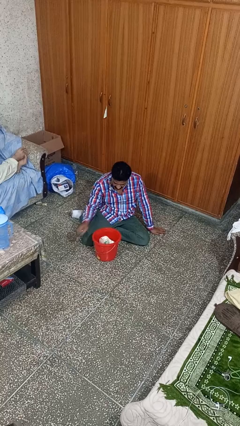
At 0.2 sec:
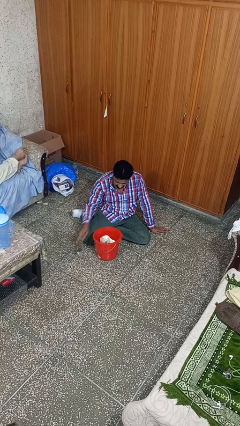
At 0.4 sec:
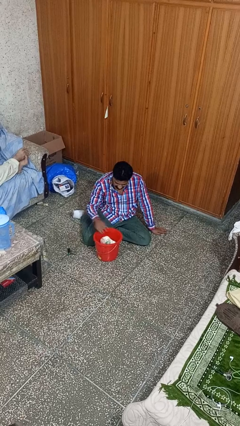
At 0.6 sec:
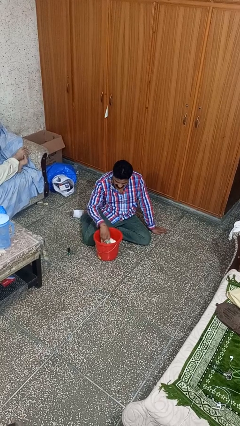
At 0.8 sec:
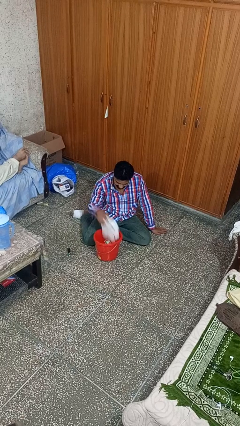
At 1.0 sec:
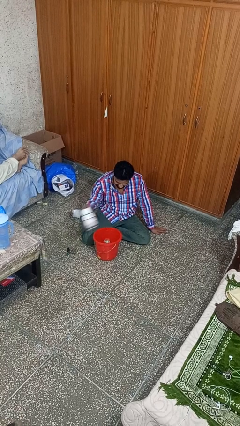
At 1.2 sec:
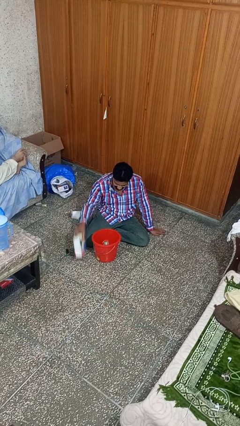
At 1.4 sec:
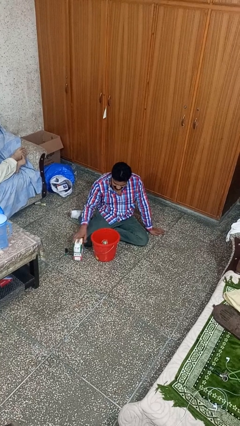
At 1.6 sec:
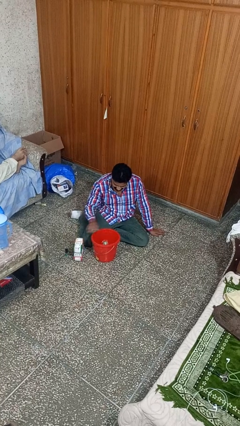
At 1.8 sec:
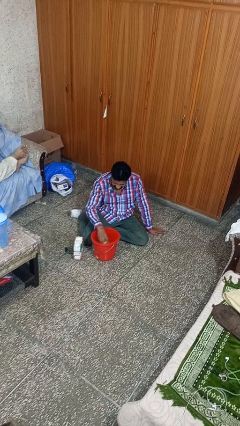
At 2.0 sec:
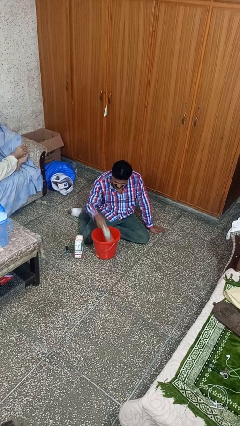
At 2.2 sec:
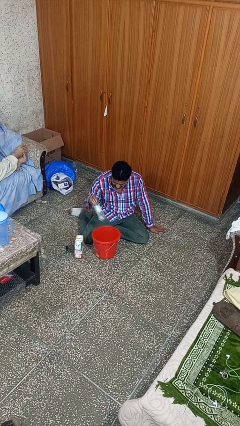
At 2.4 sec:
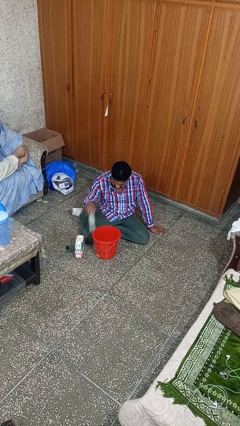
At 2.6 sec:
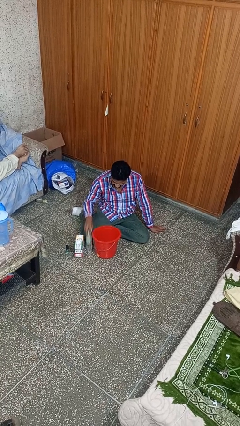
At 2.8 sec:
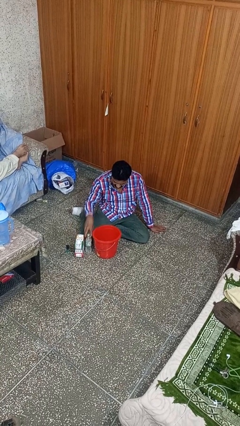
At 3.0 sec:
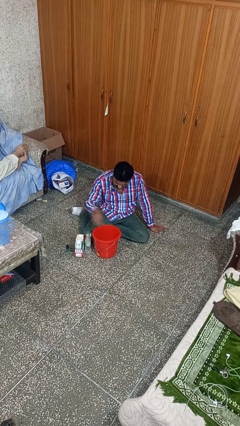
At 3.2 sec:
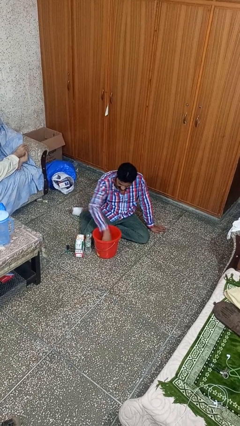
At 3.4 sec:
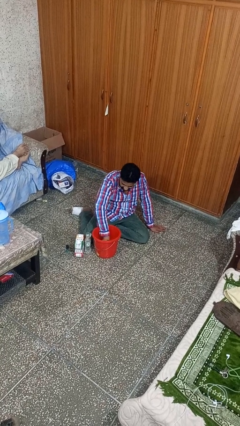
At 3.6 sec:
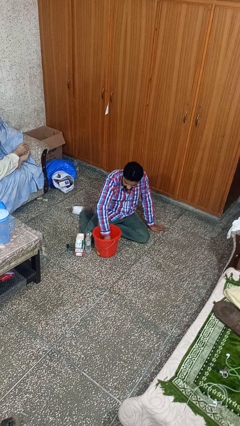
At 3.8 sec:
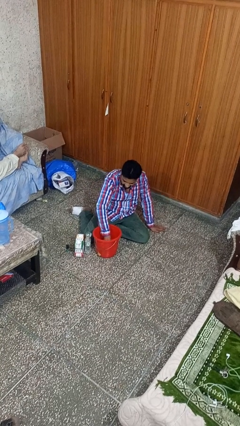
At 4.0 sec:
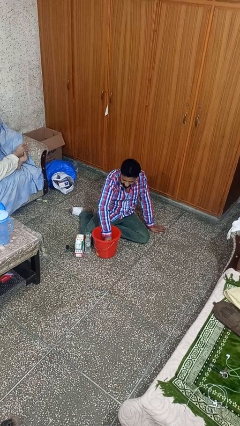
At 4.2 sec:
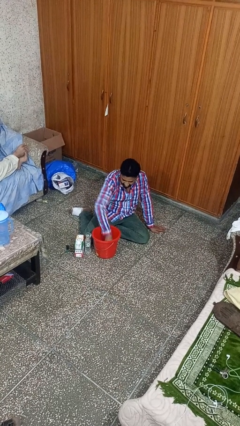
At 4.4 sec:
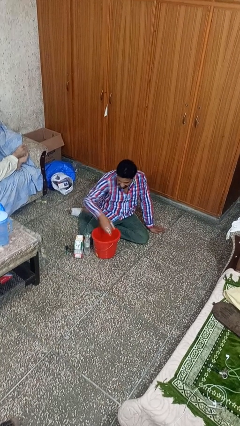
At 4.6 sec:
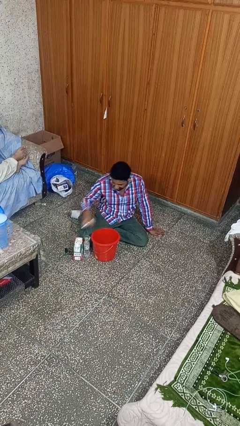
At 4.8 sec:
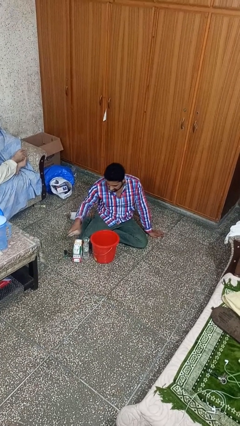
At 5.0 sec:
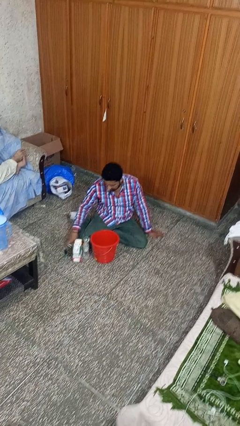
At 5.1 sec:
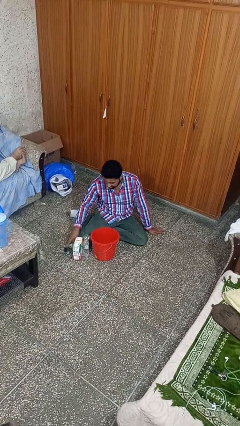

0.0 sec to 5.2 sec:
person takes object from basket

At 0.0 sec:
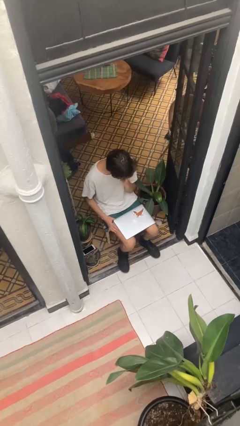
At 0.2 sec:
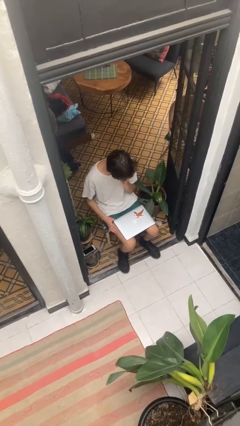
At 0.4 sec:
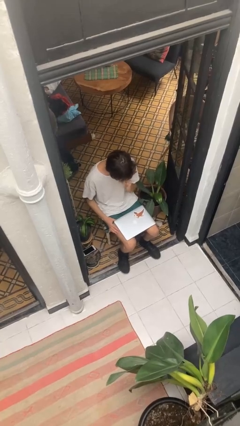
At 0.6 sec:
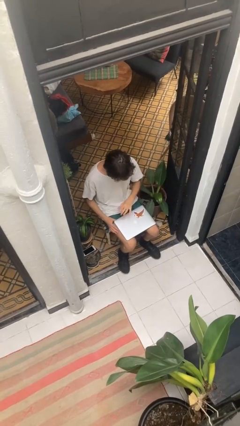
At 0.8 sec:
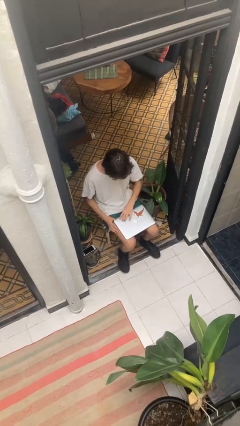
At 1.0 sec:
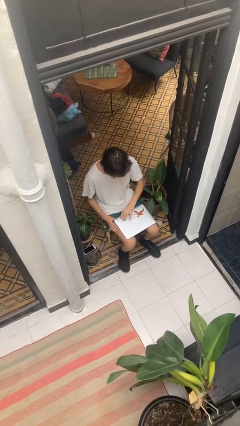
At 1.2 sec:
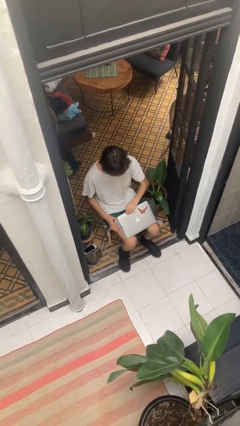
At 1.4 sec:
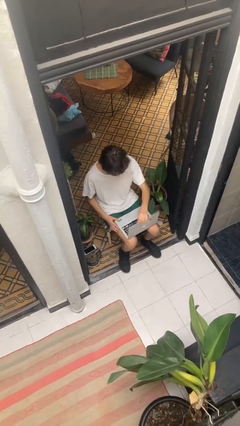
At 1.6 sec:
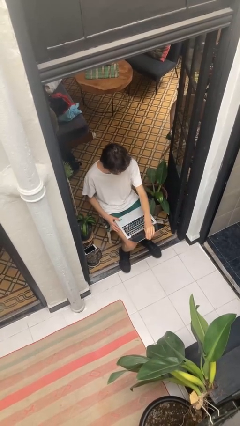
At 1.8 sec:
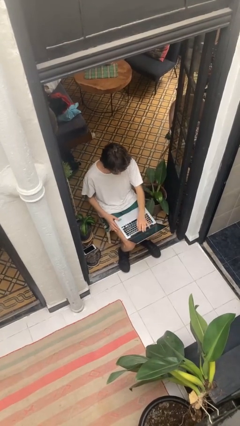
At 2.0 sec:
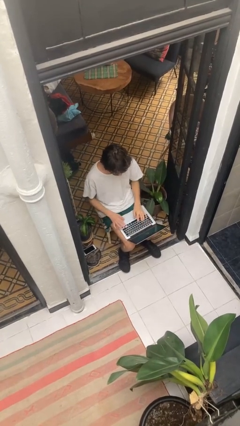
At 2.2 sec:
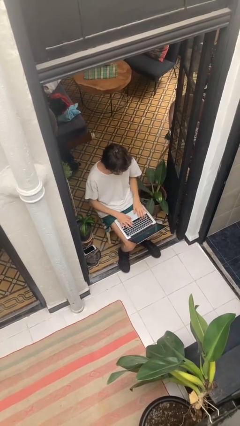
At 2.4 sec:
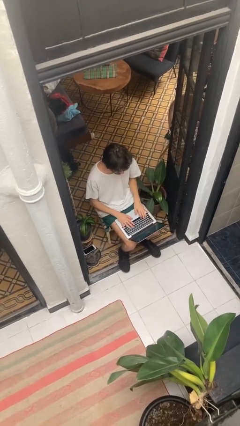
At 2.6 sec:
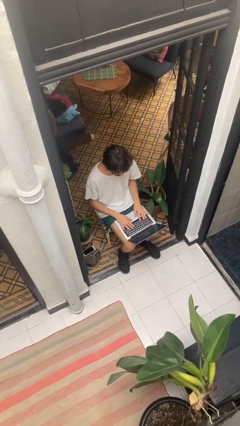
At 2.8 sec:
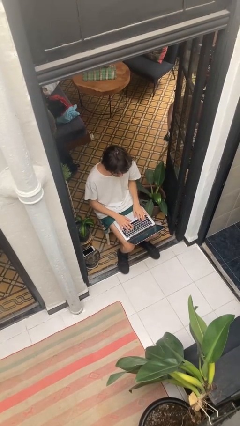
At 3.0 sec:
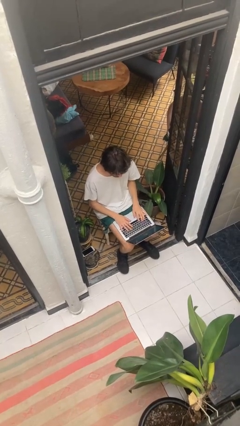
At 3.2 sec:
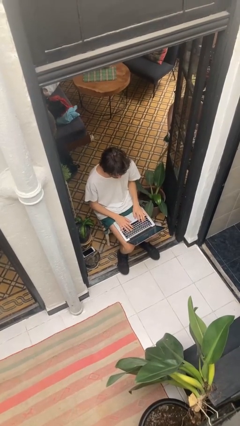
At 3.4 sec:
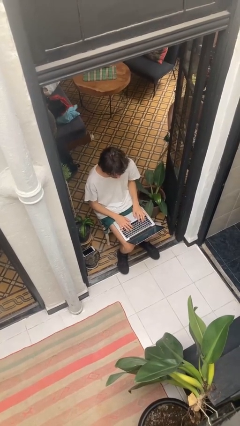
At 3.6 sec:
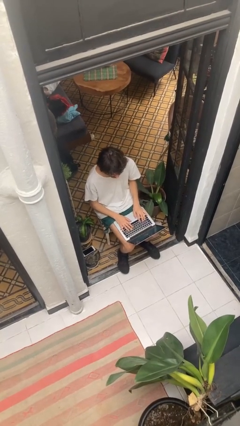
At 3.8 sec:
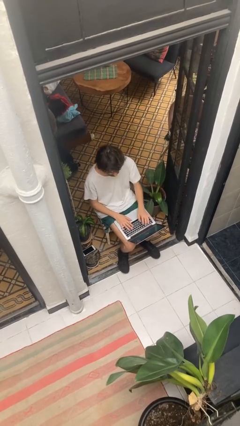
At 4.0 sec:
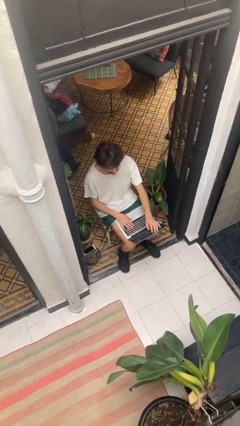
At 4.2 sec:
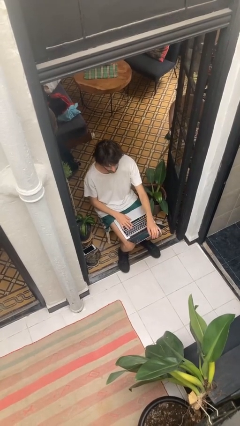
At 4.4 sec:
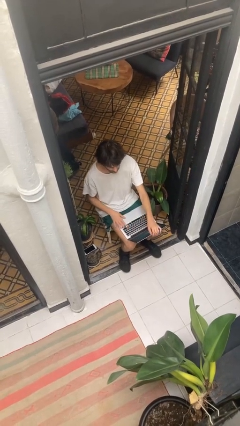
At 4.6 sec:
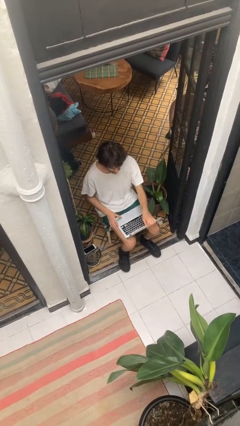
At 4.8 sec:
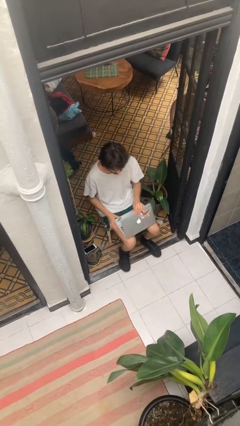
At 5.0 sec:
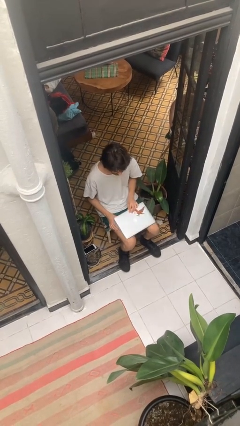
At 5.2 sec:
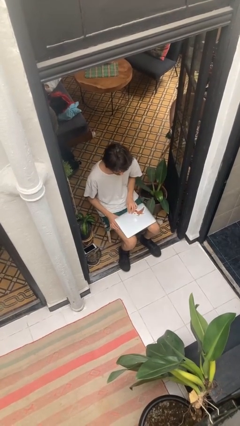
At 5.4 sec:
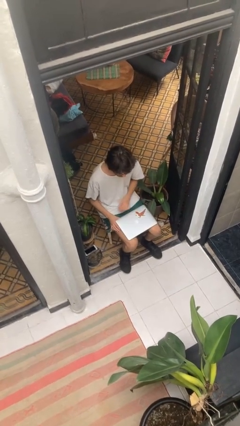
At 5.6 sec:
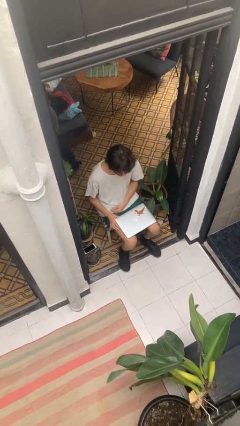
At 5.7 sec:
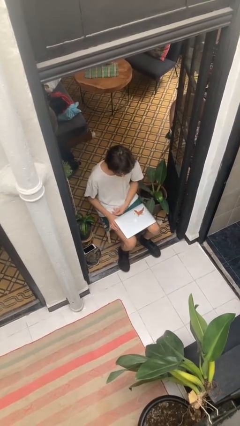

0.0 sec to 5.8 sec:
person interacts with laptop

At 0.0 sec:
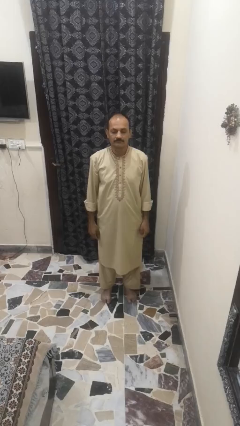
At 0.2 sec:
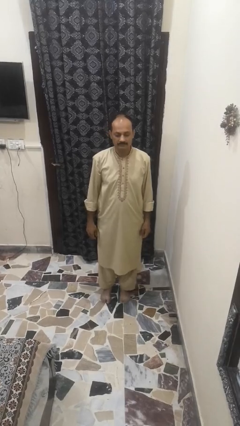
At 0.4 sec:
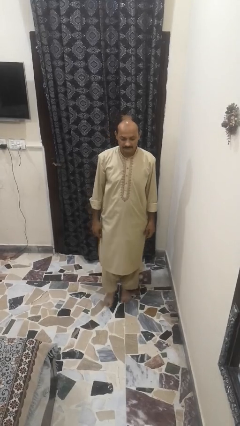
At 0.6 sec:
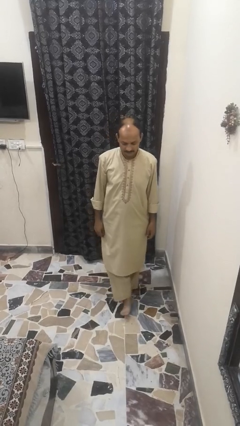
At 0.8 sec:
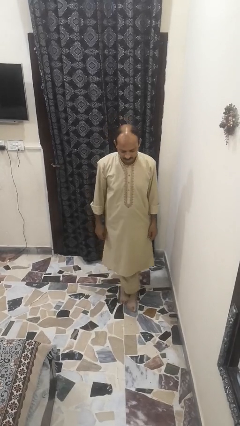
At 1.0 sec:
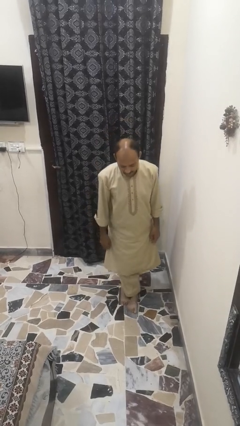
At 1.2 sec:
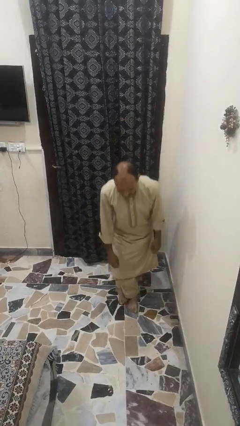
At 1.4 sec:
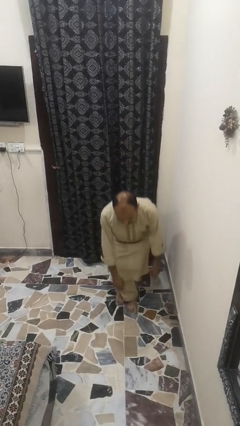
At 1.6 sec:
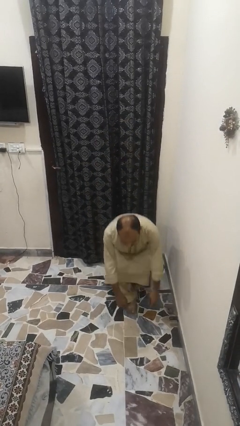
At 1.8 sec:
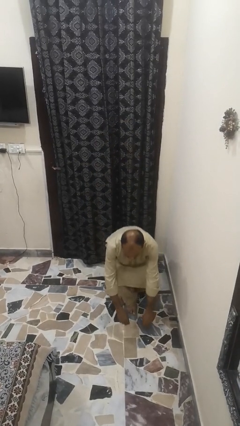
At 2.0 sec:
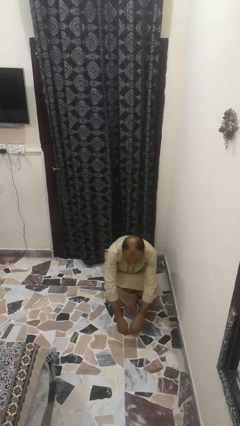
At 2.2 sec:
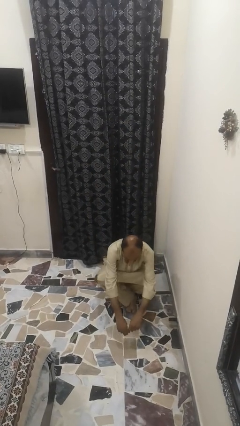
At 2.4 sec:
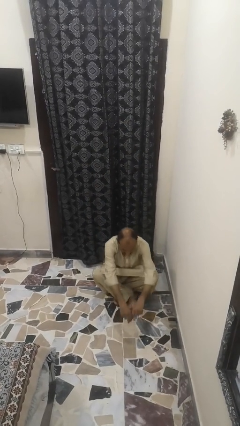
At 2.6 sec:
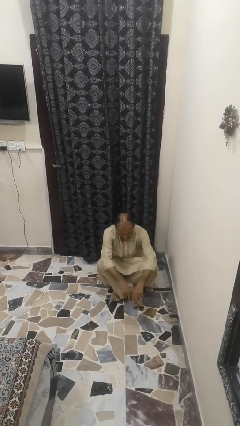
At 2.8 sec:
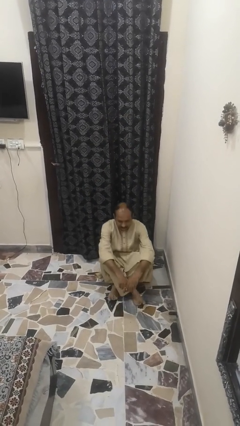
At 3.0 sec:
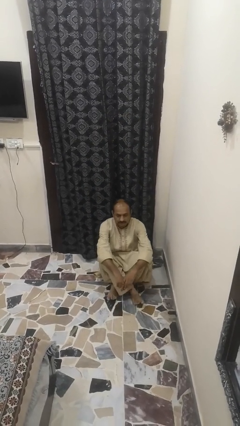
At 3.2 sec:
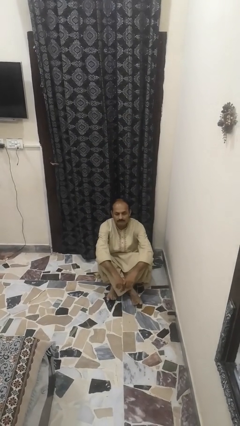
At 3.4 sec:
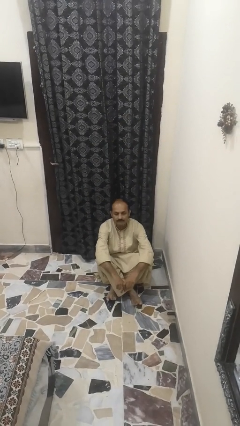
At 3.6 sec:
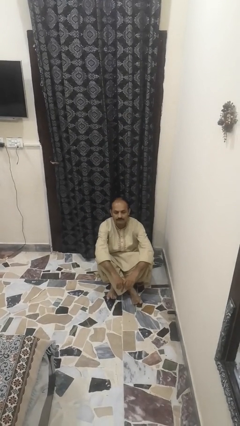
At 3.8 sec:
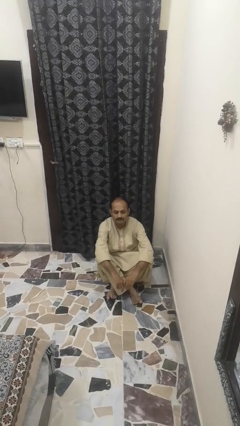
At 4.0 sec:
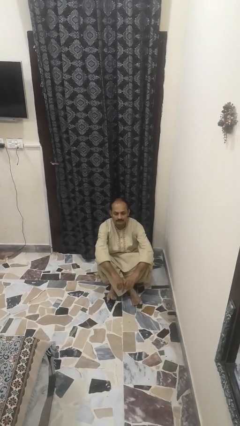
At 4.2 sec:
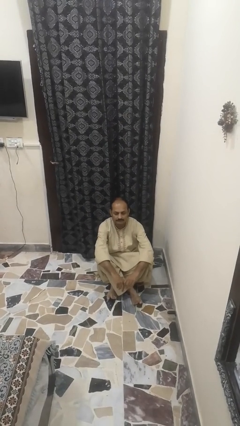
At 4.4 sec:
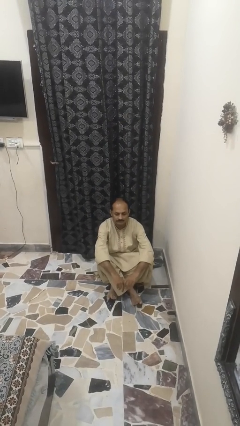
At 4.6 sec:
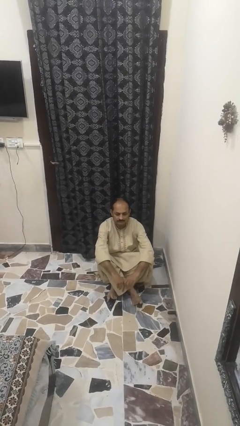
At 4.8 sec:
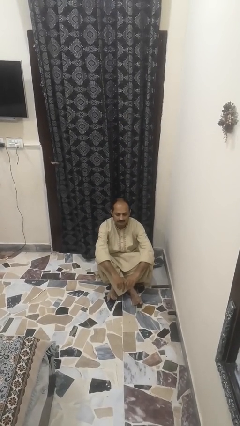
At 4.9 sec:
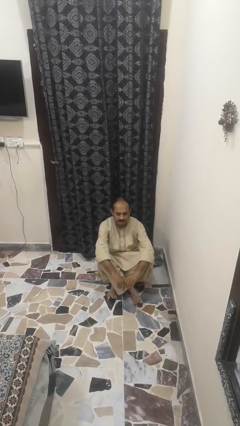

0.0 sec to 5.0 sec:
person sits crisscross

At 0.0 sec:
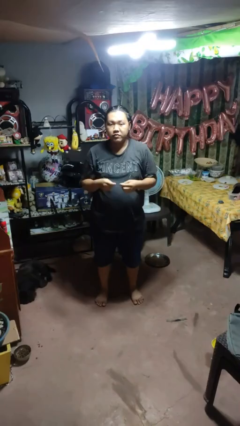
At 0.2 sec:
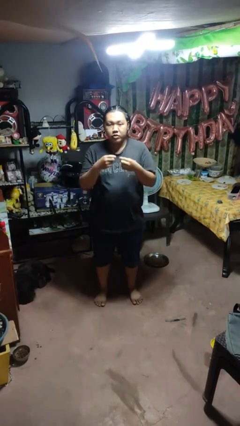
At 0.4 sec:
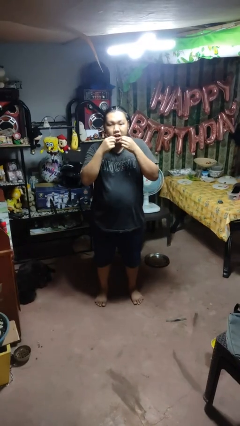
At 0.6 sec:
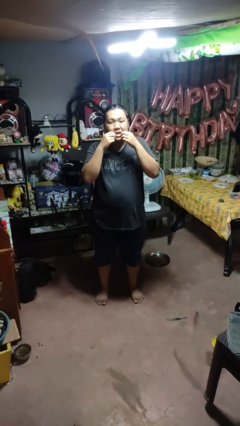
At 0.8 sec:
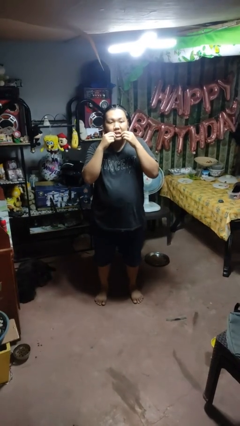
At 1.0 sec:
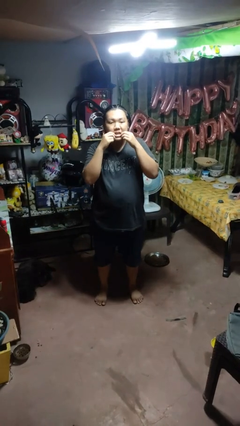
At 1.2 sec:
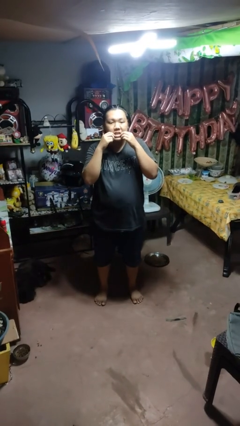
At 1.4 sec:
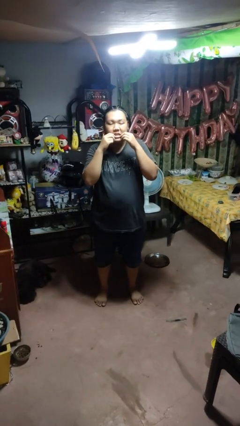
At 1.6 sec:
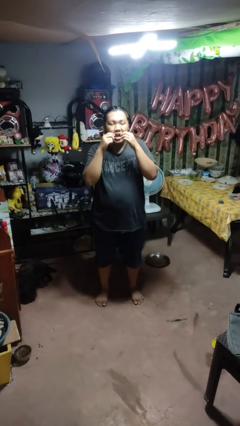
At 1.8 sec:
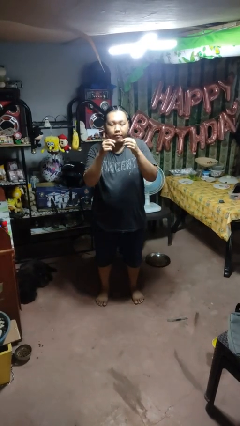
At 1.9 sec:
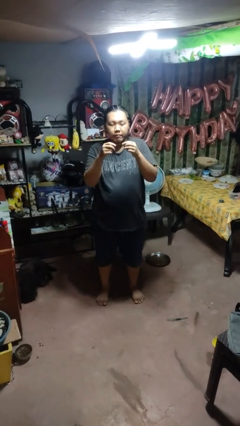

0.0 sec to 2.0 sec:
person flosses

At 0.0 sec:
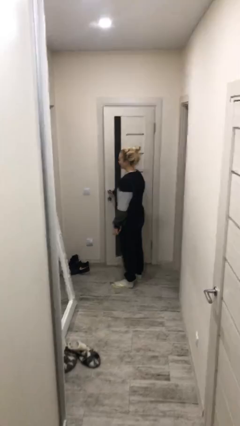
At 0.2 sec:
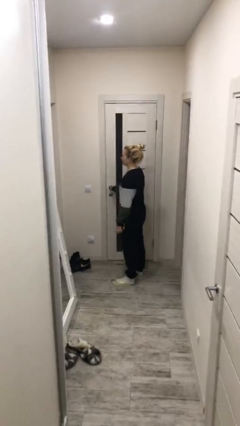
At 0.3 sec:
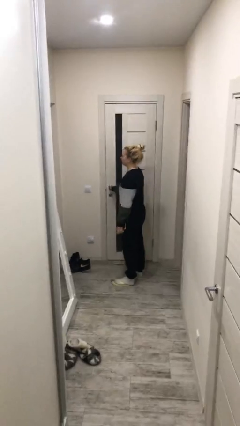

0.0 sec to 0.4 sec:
person closes facility door
